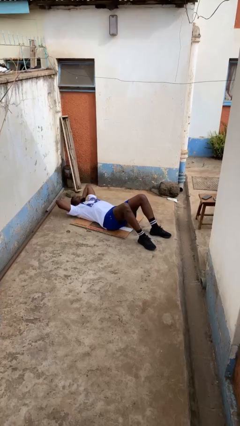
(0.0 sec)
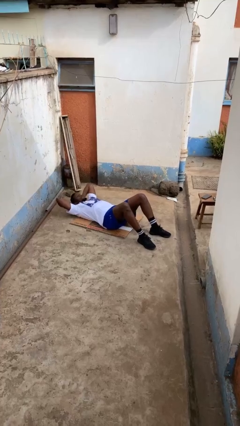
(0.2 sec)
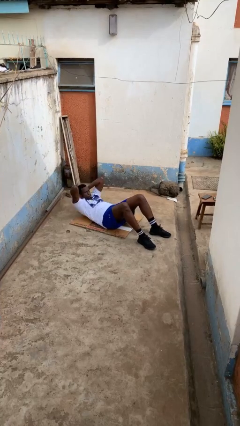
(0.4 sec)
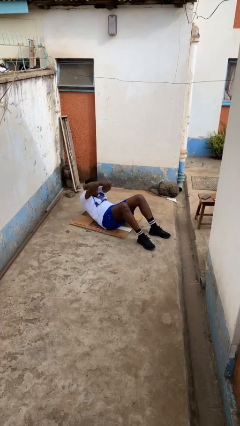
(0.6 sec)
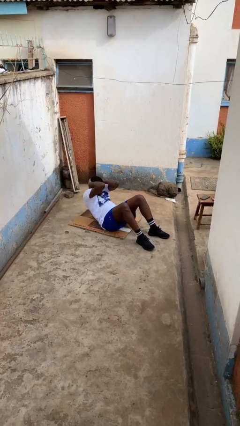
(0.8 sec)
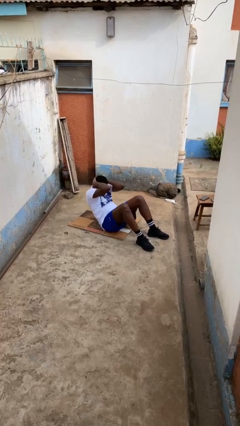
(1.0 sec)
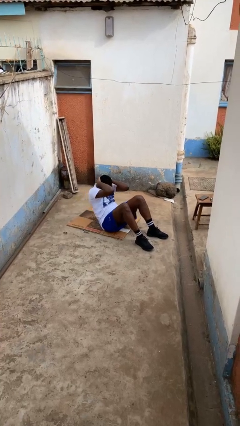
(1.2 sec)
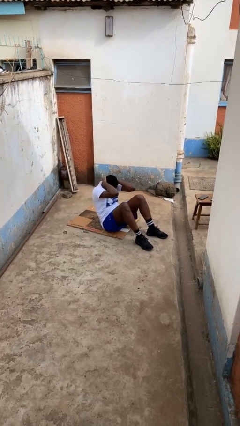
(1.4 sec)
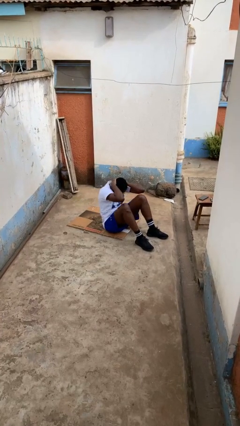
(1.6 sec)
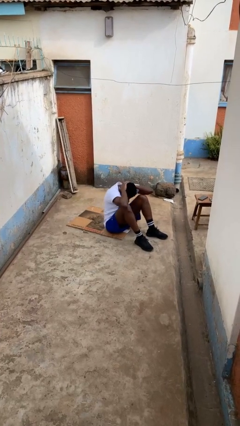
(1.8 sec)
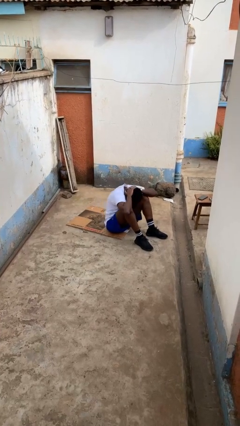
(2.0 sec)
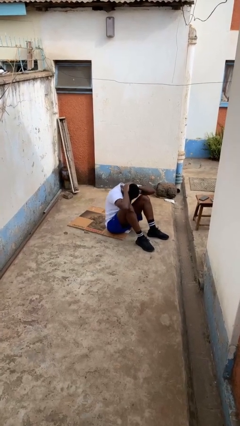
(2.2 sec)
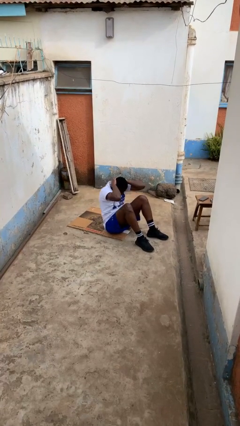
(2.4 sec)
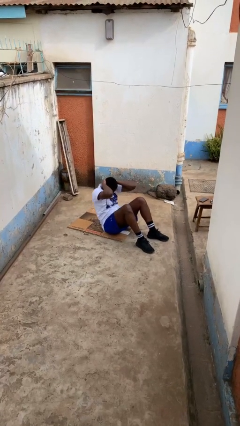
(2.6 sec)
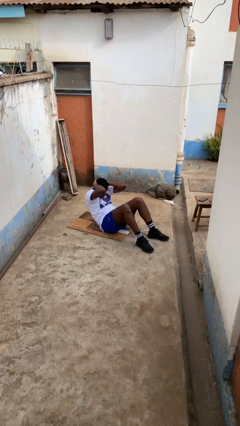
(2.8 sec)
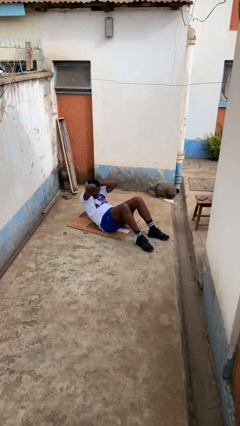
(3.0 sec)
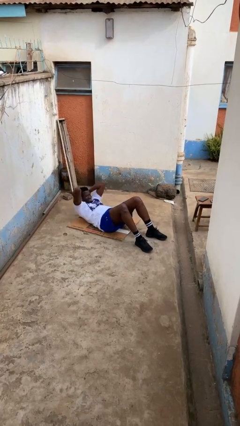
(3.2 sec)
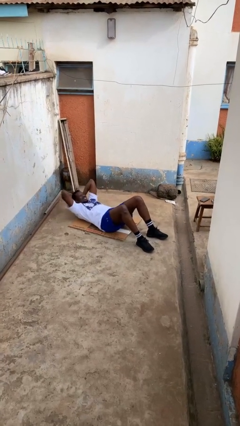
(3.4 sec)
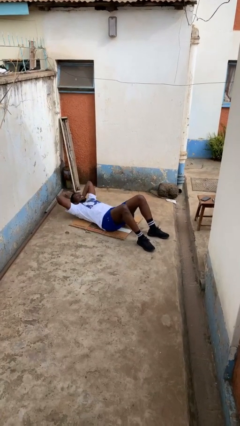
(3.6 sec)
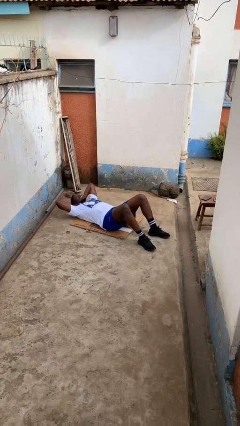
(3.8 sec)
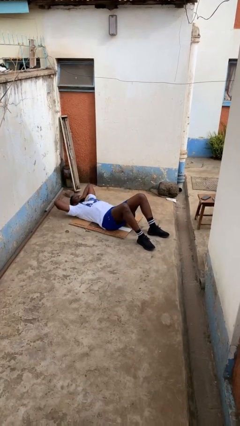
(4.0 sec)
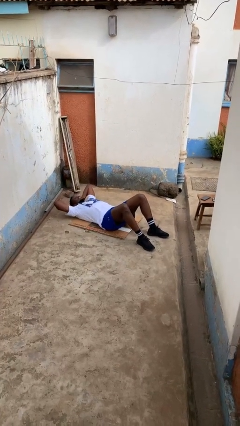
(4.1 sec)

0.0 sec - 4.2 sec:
person exercises with situp

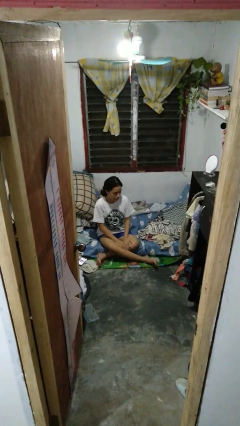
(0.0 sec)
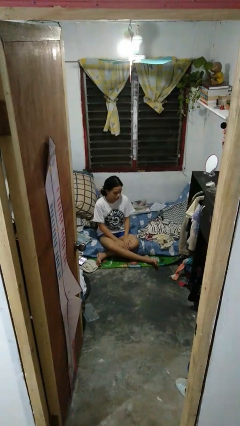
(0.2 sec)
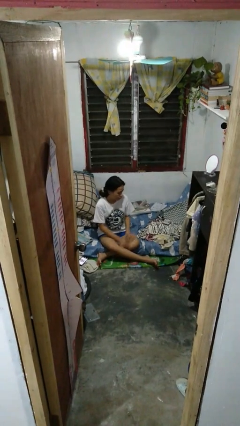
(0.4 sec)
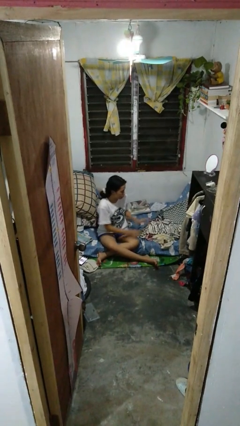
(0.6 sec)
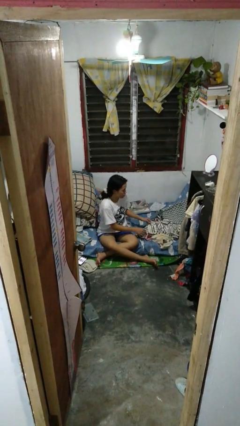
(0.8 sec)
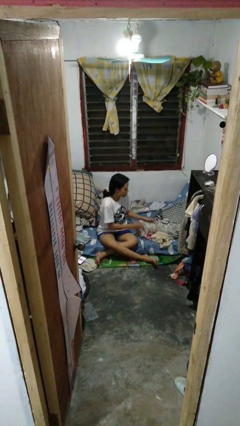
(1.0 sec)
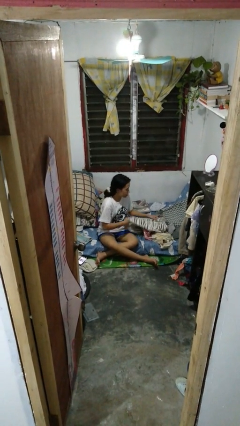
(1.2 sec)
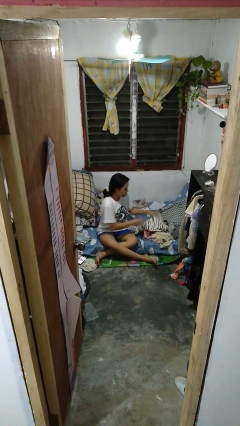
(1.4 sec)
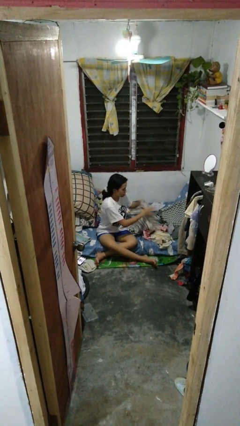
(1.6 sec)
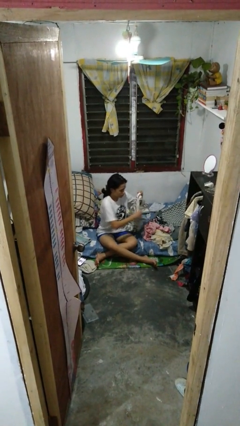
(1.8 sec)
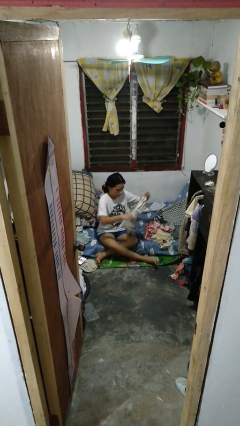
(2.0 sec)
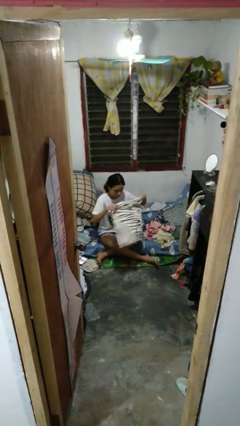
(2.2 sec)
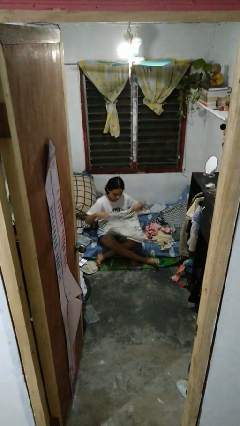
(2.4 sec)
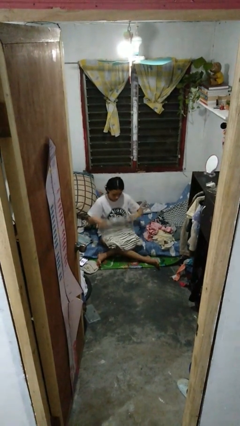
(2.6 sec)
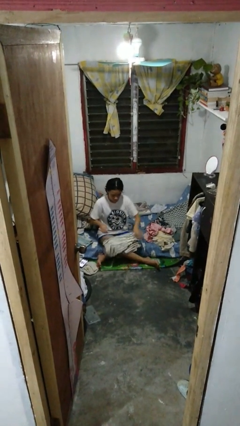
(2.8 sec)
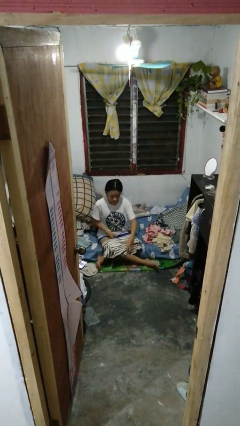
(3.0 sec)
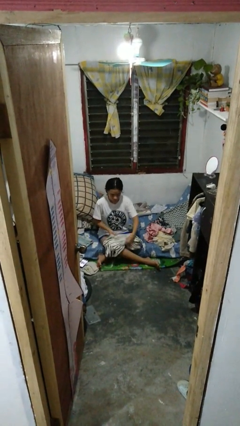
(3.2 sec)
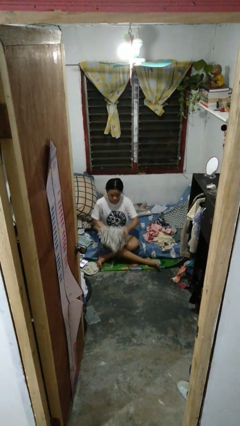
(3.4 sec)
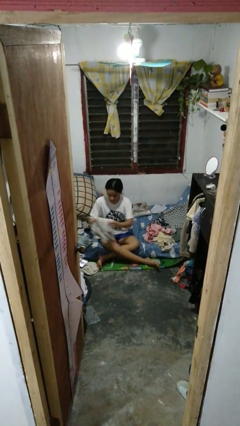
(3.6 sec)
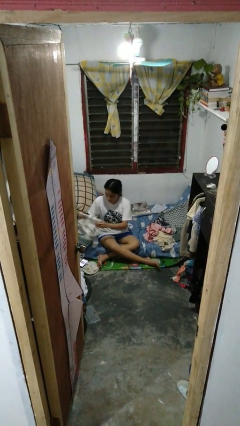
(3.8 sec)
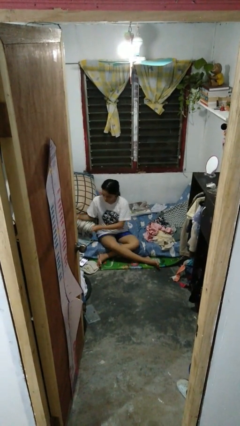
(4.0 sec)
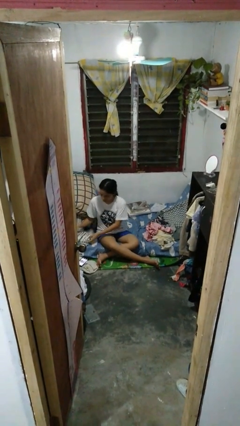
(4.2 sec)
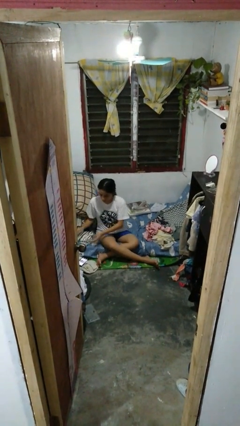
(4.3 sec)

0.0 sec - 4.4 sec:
person folds shirt

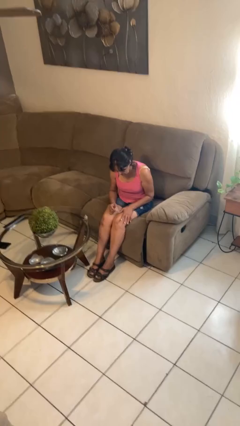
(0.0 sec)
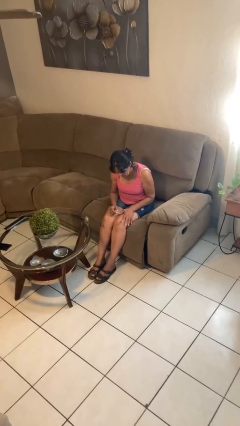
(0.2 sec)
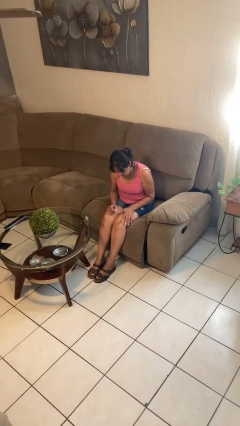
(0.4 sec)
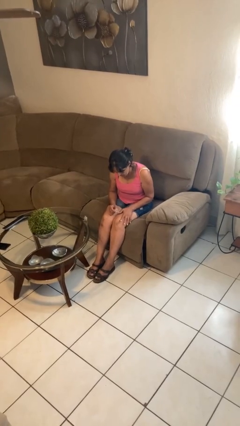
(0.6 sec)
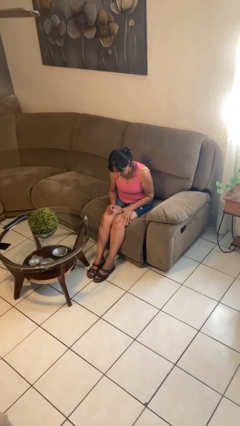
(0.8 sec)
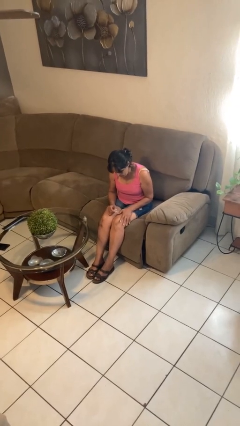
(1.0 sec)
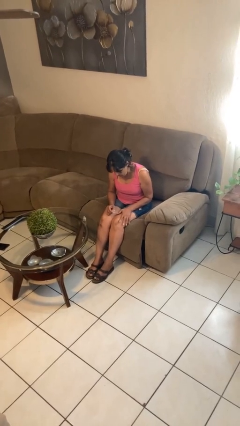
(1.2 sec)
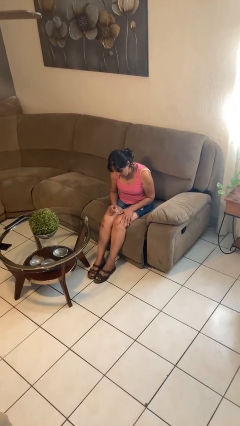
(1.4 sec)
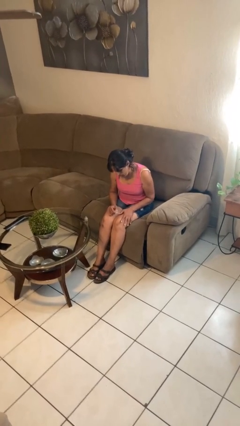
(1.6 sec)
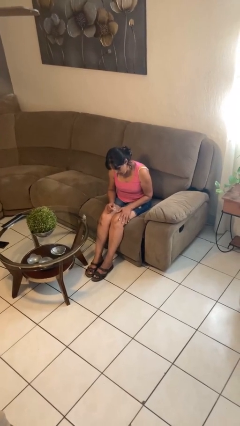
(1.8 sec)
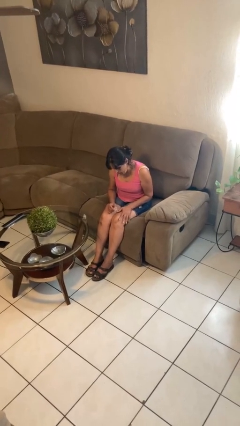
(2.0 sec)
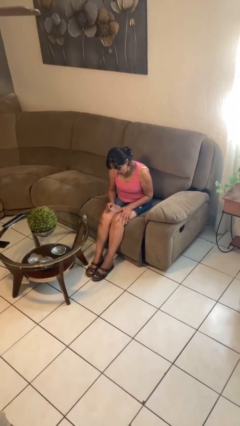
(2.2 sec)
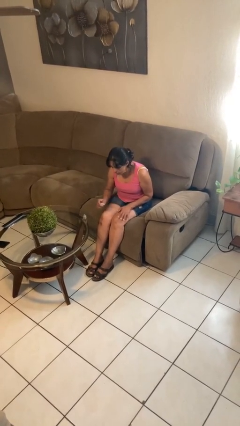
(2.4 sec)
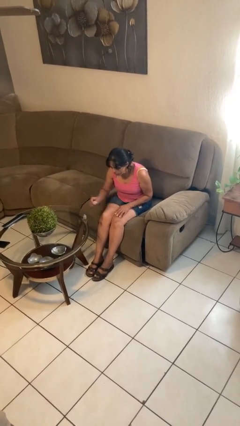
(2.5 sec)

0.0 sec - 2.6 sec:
person paints fingernails

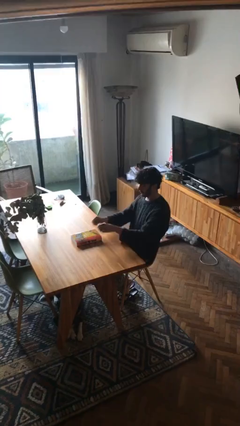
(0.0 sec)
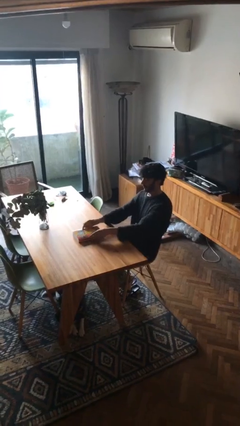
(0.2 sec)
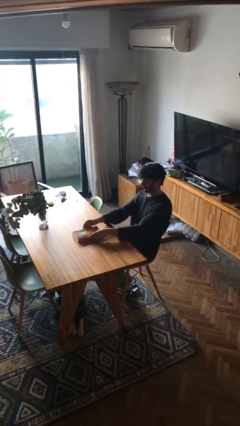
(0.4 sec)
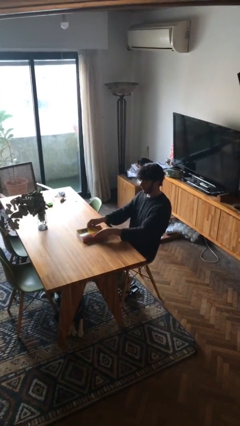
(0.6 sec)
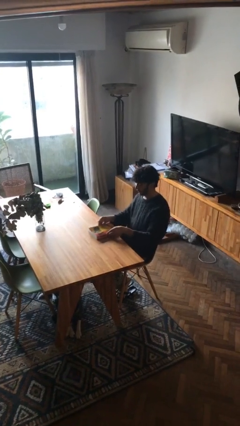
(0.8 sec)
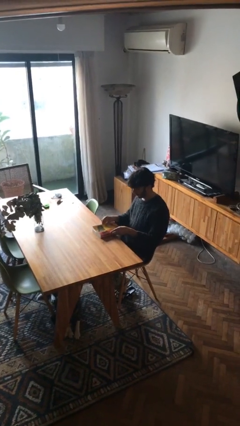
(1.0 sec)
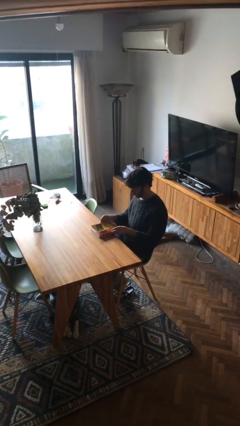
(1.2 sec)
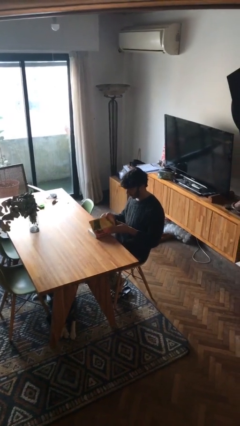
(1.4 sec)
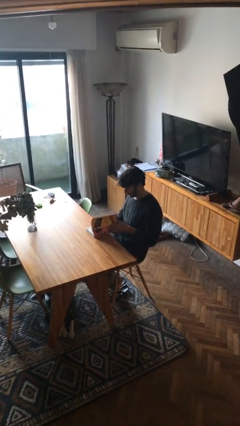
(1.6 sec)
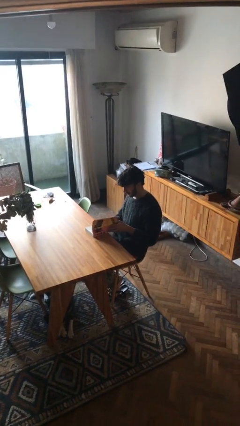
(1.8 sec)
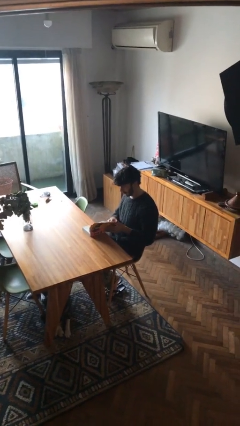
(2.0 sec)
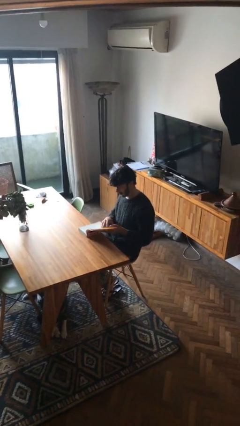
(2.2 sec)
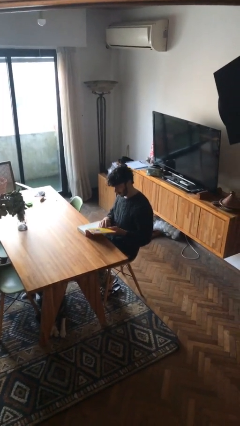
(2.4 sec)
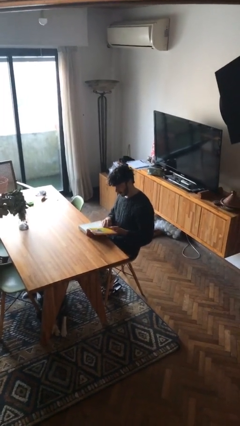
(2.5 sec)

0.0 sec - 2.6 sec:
person picks up object from table

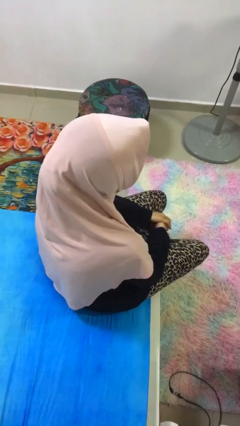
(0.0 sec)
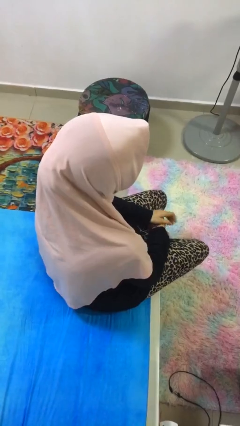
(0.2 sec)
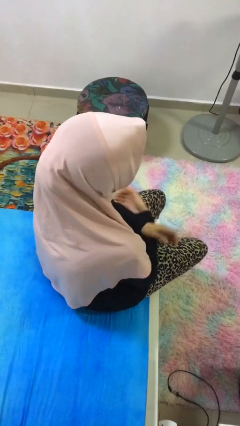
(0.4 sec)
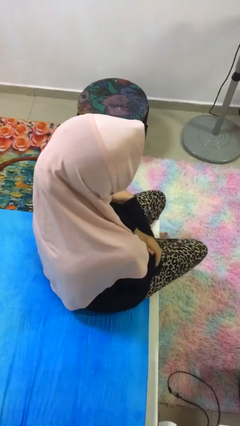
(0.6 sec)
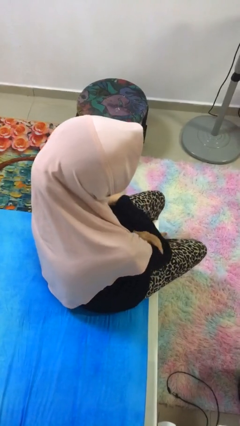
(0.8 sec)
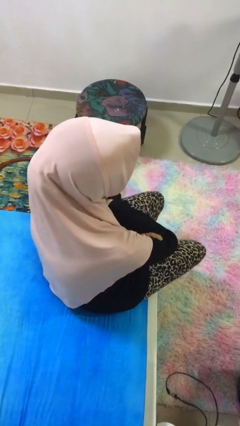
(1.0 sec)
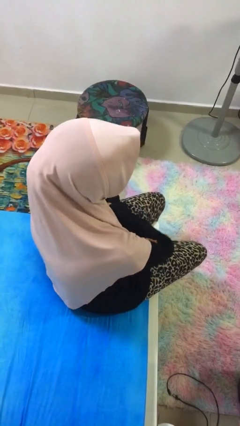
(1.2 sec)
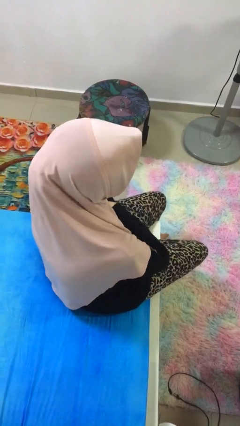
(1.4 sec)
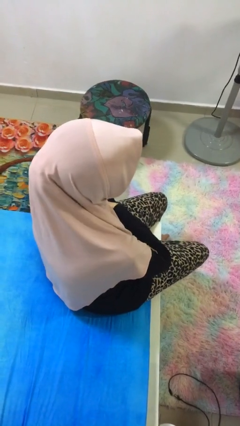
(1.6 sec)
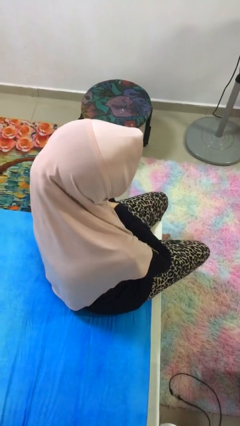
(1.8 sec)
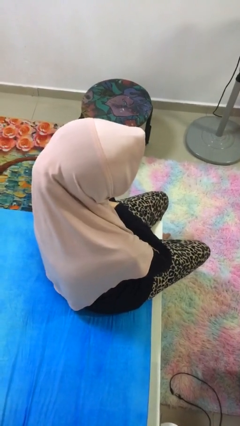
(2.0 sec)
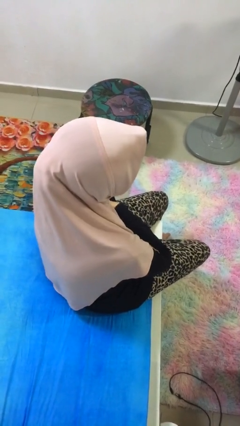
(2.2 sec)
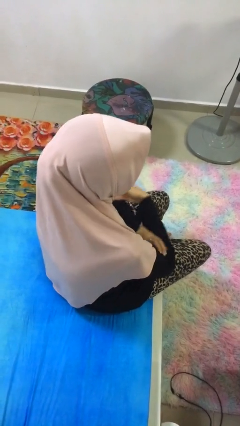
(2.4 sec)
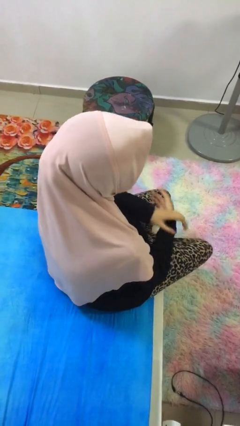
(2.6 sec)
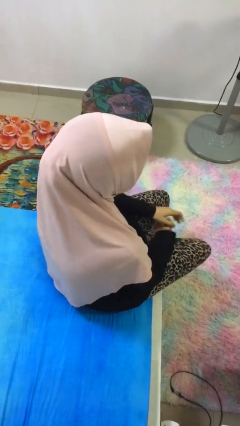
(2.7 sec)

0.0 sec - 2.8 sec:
person crosses arms

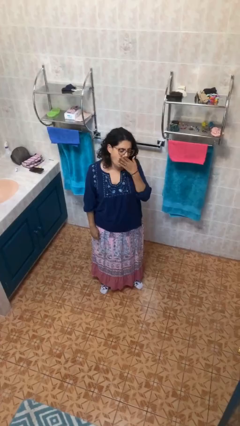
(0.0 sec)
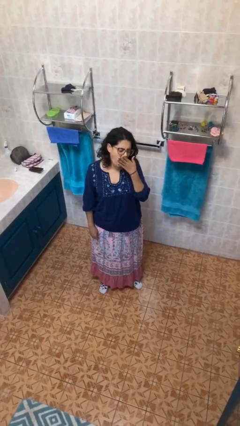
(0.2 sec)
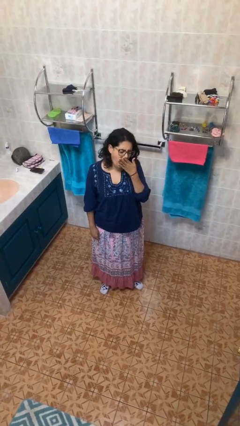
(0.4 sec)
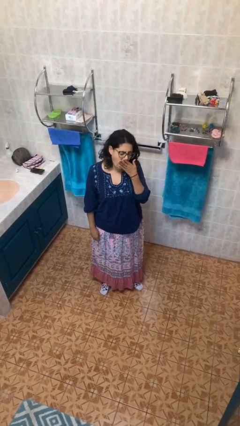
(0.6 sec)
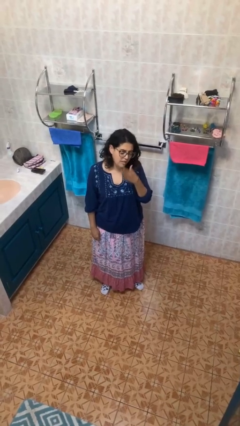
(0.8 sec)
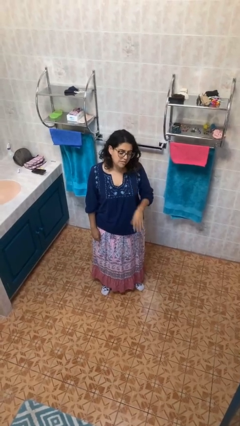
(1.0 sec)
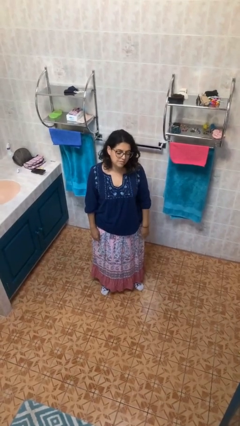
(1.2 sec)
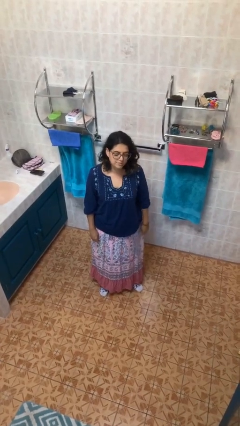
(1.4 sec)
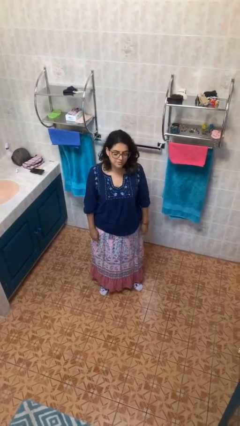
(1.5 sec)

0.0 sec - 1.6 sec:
person yawns
